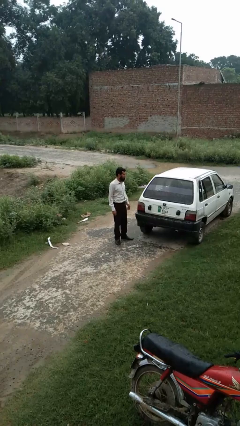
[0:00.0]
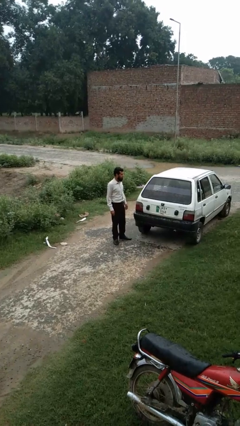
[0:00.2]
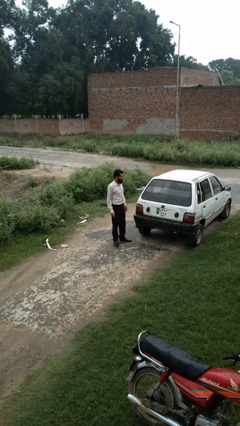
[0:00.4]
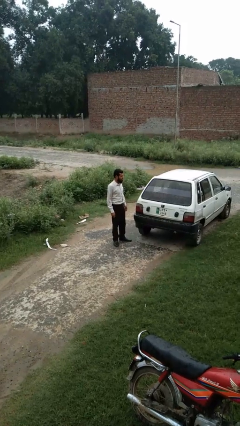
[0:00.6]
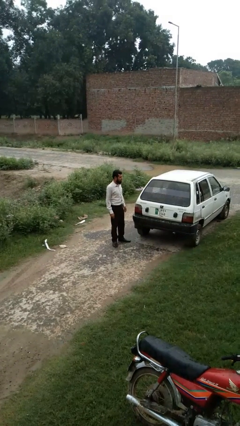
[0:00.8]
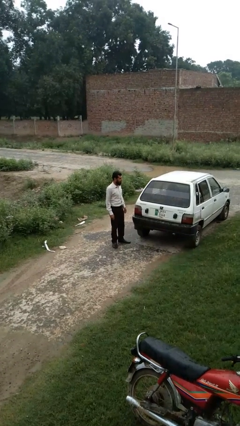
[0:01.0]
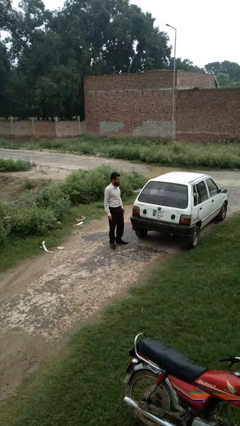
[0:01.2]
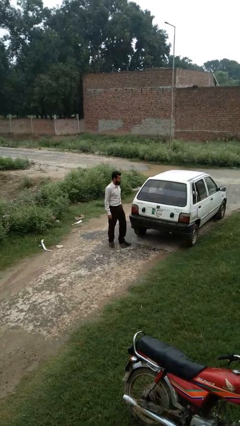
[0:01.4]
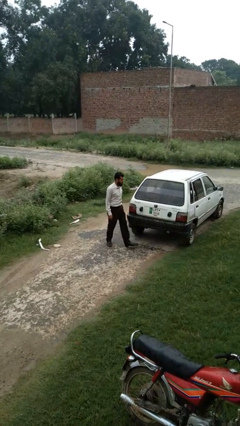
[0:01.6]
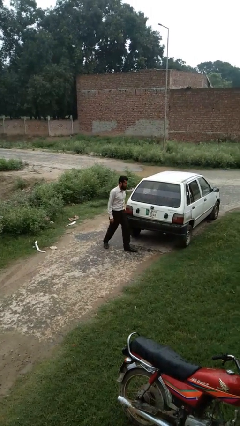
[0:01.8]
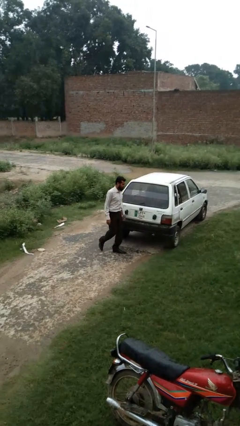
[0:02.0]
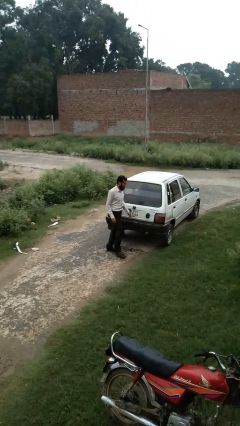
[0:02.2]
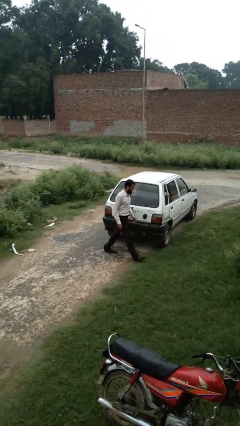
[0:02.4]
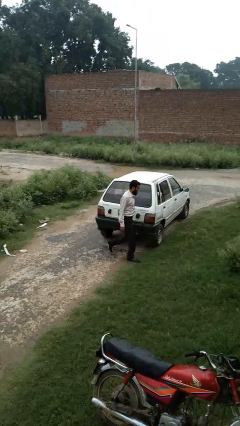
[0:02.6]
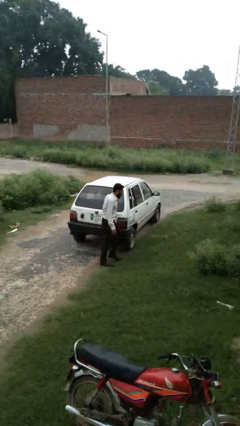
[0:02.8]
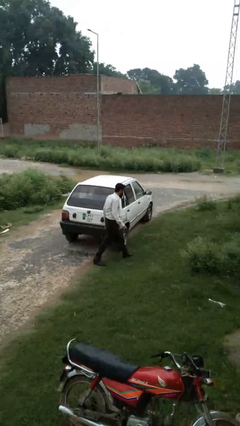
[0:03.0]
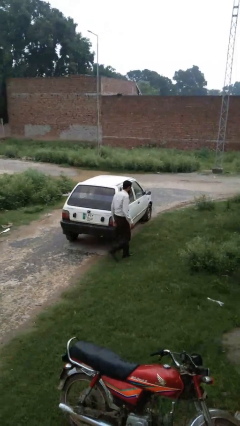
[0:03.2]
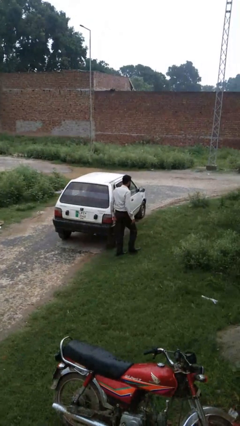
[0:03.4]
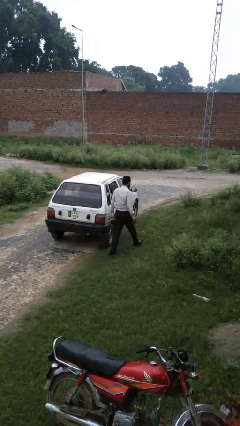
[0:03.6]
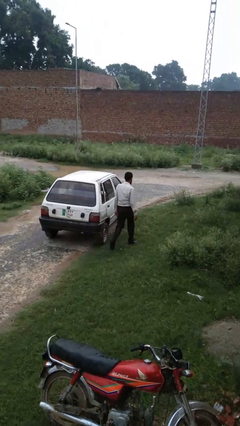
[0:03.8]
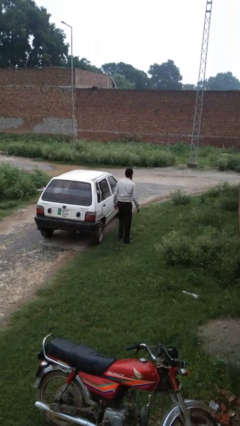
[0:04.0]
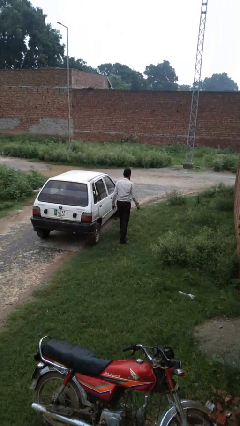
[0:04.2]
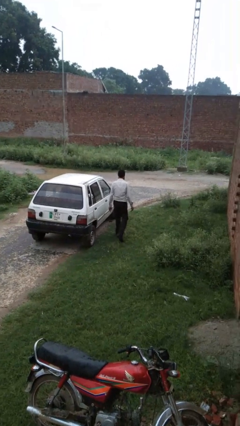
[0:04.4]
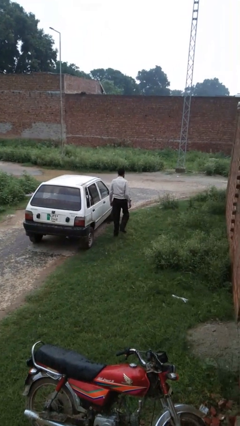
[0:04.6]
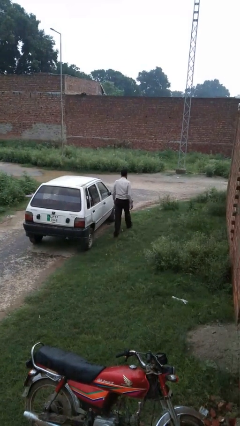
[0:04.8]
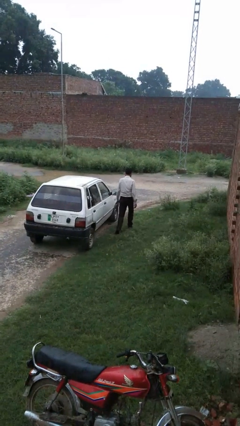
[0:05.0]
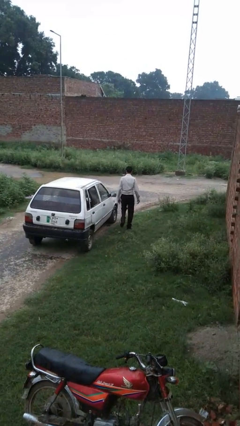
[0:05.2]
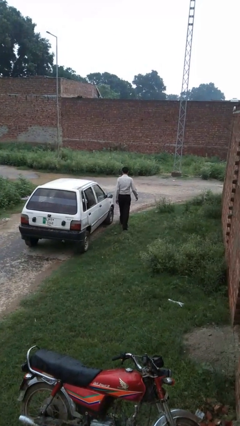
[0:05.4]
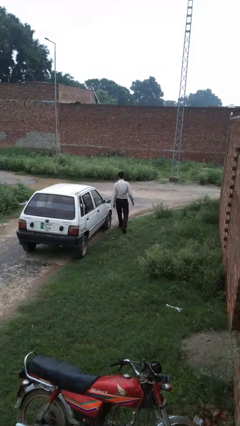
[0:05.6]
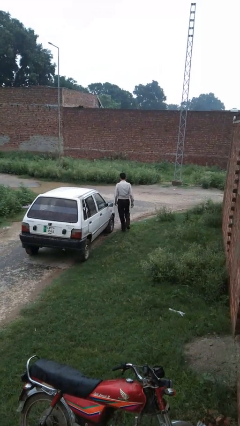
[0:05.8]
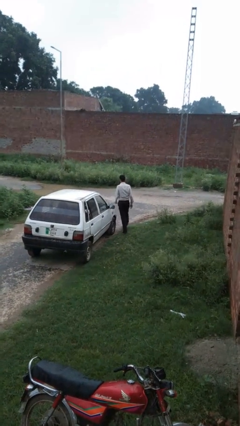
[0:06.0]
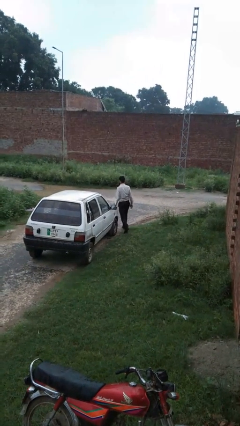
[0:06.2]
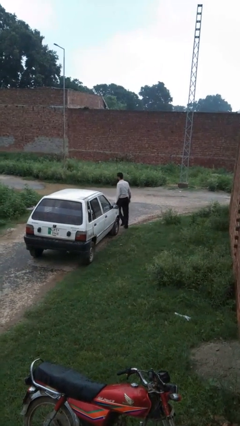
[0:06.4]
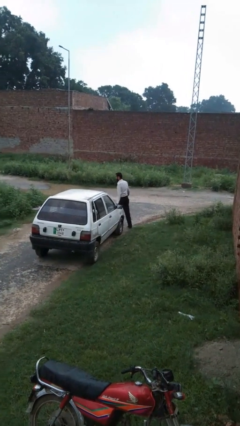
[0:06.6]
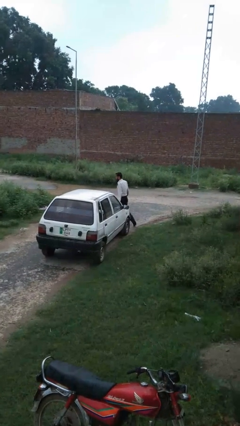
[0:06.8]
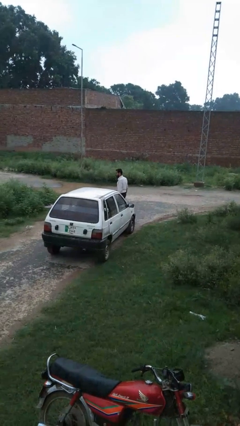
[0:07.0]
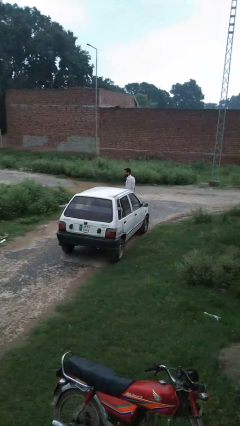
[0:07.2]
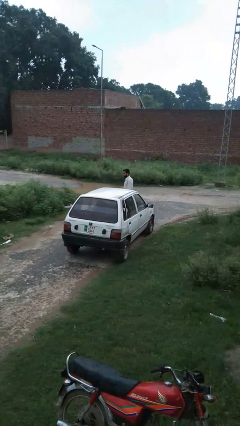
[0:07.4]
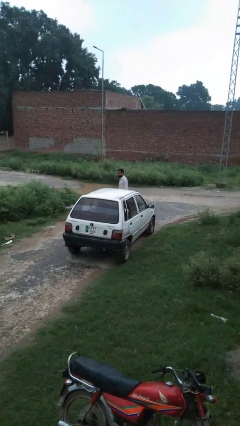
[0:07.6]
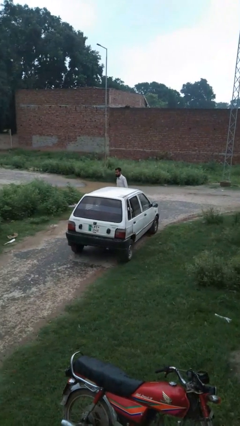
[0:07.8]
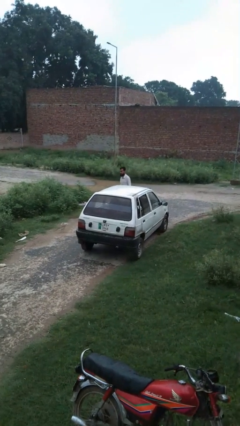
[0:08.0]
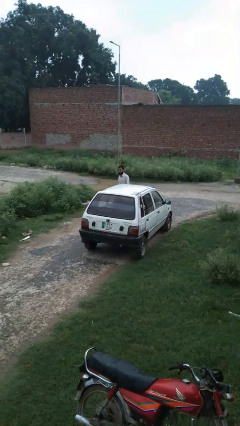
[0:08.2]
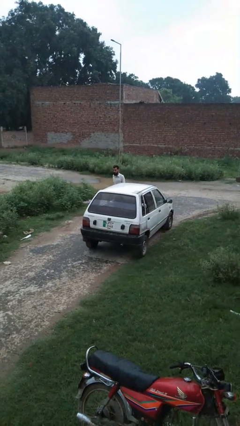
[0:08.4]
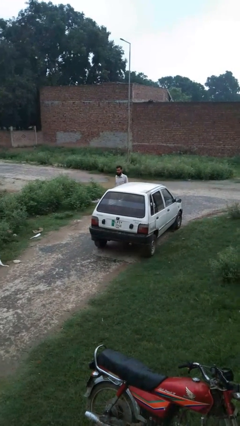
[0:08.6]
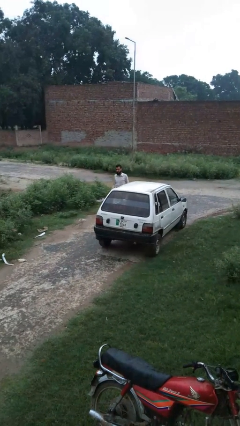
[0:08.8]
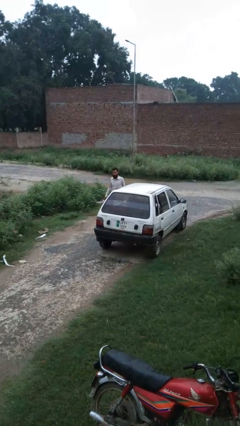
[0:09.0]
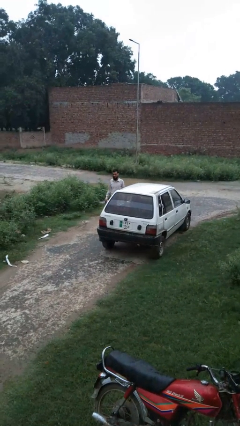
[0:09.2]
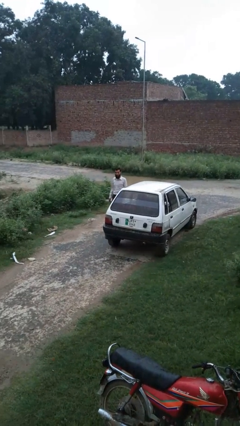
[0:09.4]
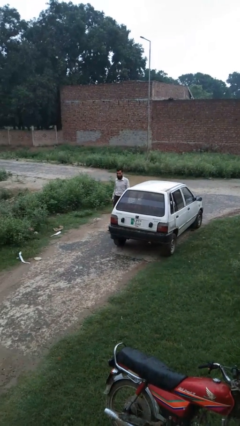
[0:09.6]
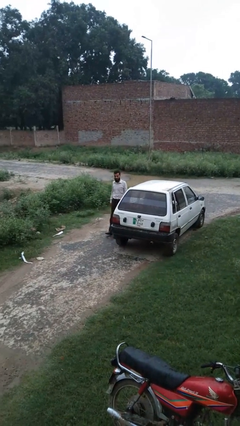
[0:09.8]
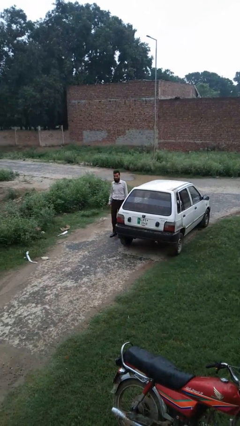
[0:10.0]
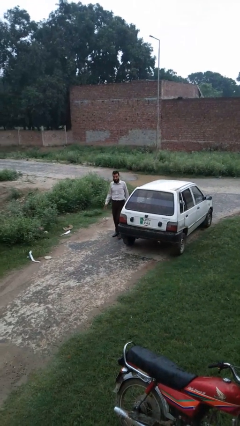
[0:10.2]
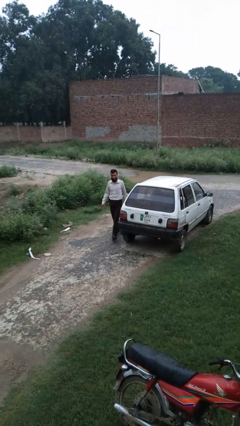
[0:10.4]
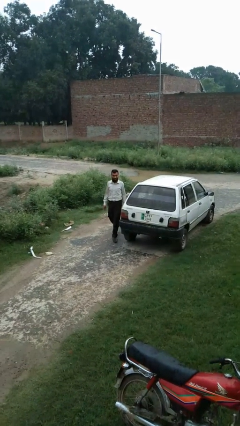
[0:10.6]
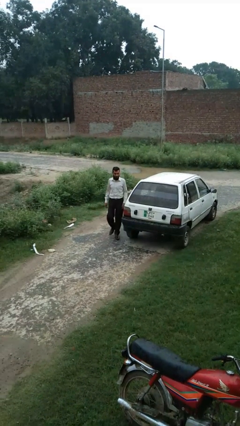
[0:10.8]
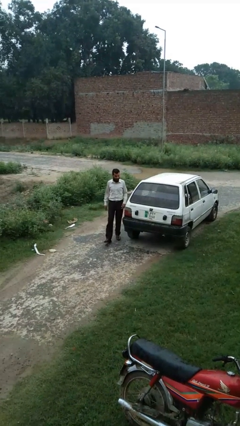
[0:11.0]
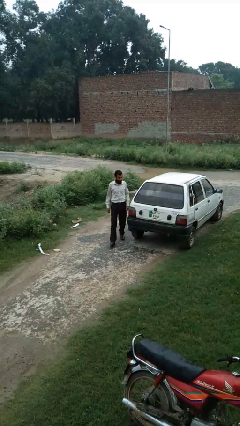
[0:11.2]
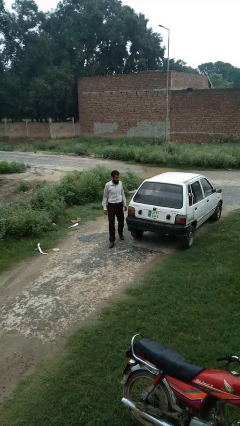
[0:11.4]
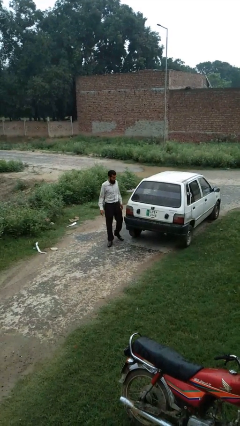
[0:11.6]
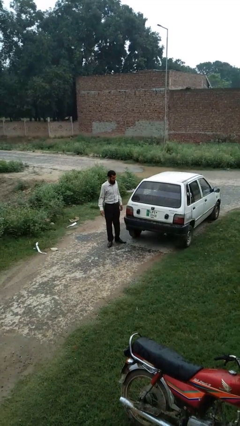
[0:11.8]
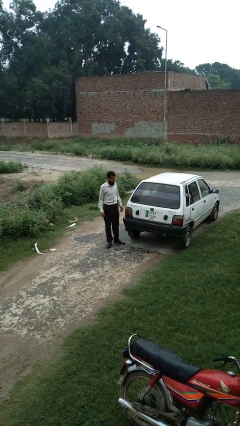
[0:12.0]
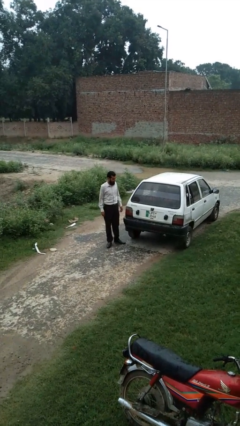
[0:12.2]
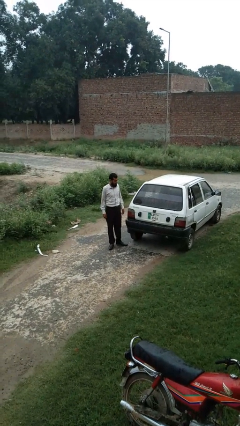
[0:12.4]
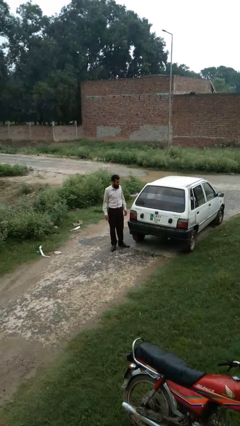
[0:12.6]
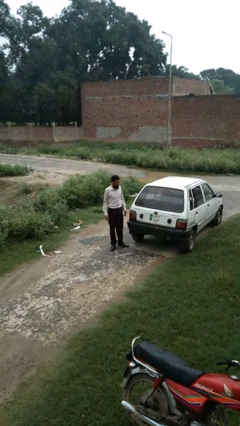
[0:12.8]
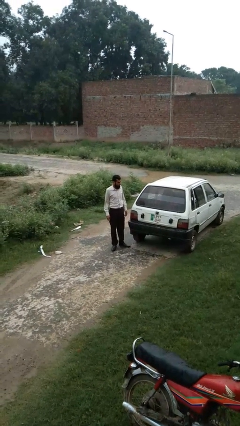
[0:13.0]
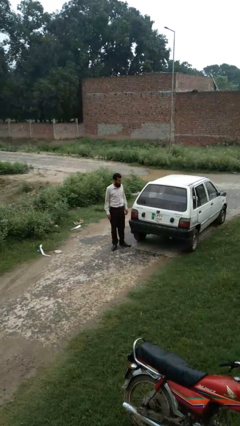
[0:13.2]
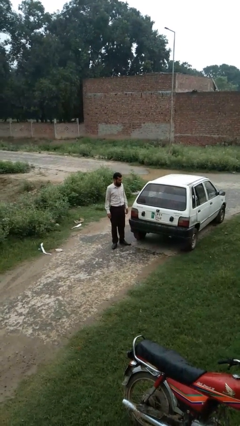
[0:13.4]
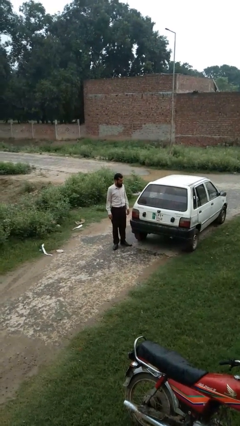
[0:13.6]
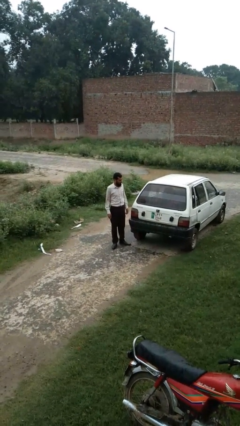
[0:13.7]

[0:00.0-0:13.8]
person walks around car

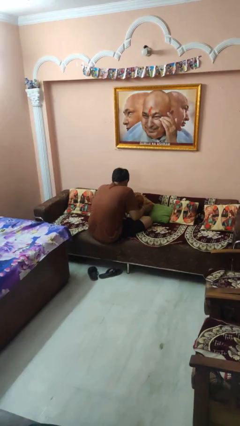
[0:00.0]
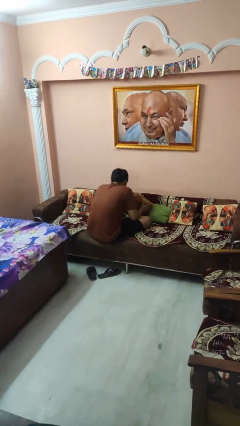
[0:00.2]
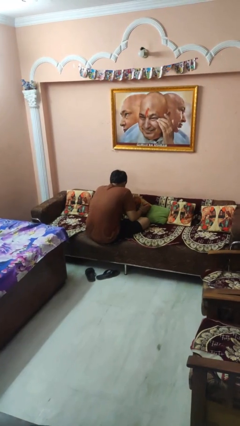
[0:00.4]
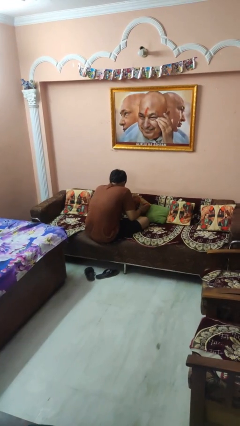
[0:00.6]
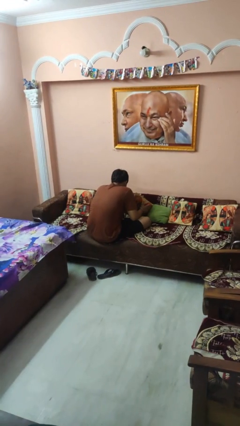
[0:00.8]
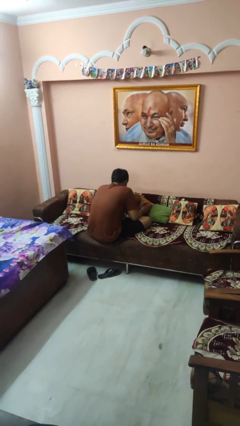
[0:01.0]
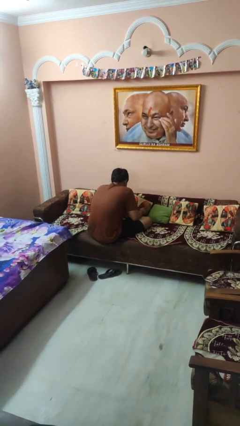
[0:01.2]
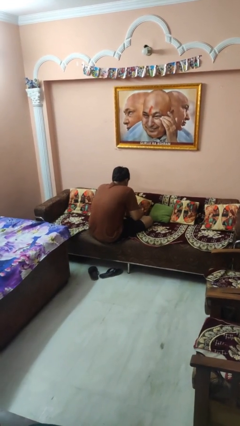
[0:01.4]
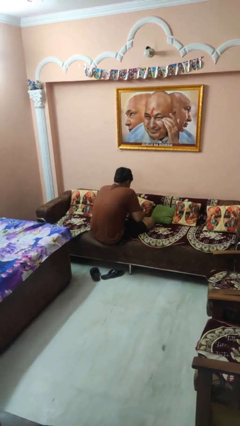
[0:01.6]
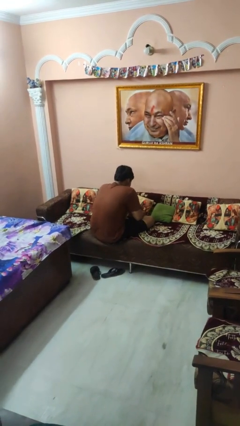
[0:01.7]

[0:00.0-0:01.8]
person searches in couch

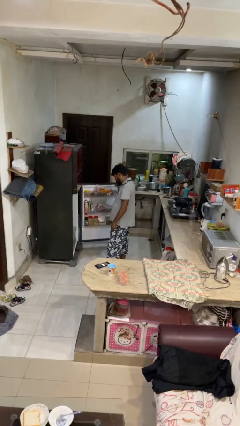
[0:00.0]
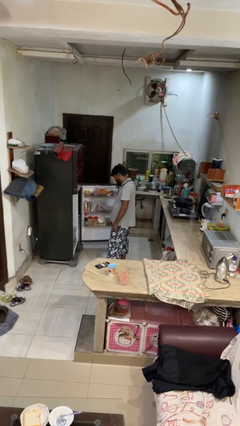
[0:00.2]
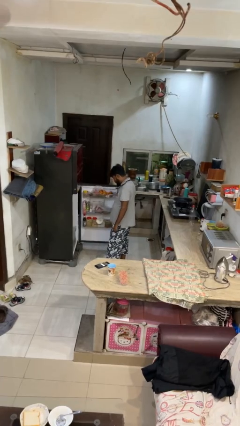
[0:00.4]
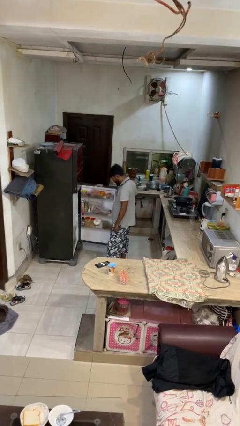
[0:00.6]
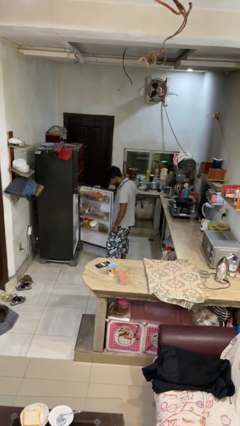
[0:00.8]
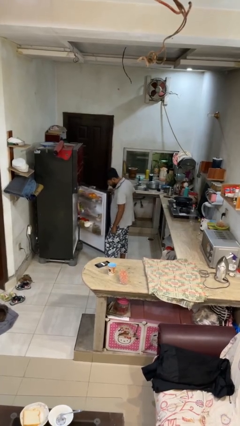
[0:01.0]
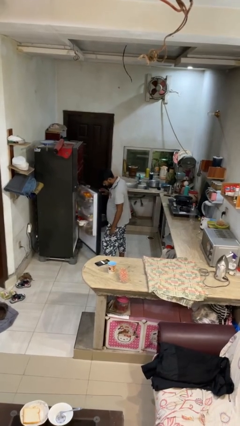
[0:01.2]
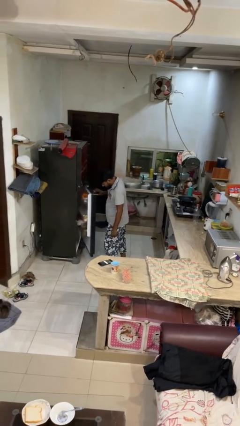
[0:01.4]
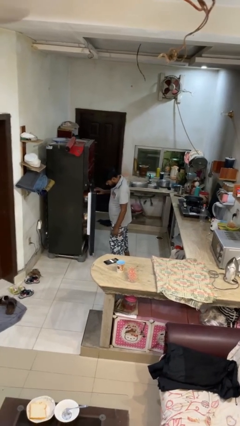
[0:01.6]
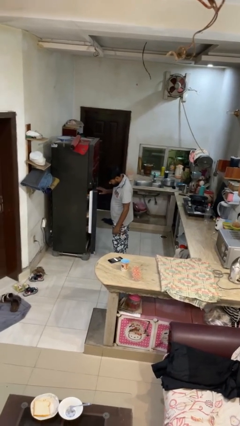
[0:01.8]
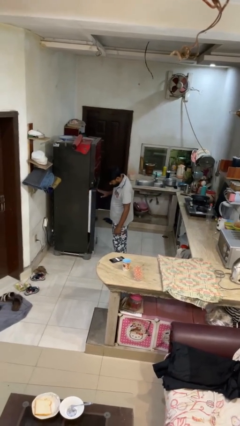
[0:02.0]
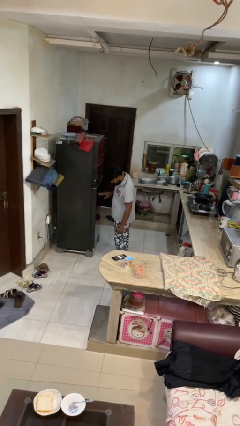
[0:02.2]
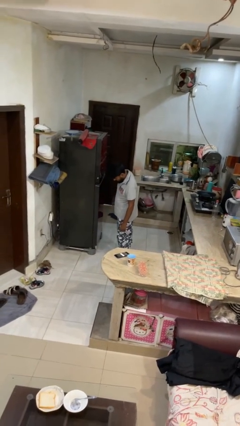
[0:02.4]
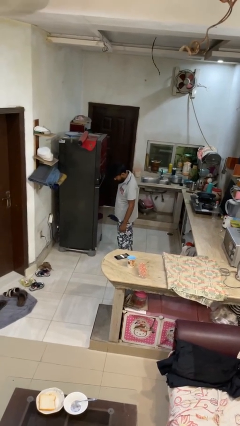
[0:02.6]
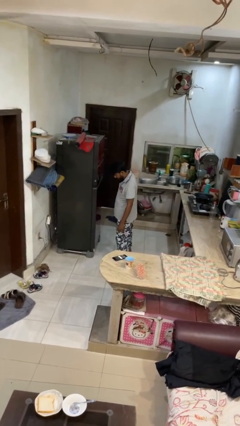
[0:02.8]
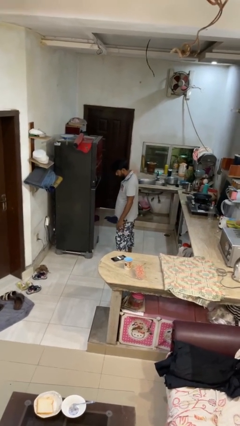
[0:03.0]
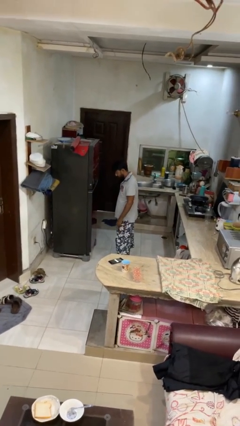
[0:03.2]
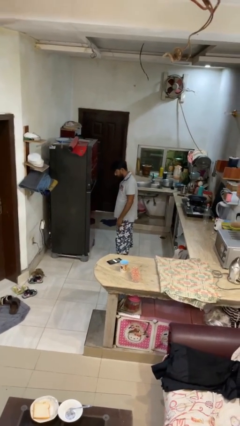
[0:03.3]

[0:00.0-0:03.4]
person closes refrigerator
